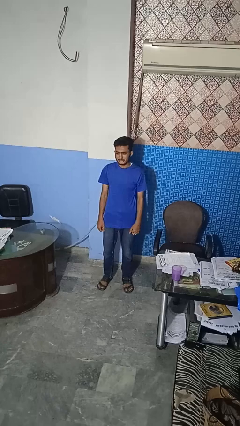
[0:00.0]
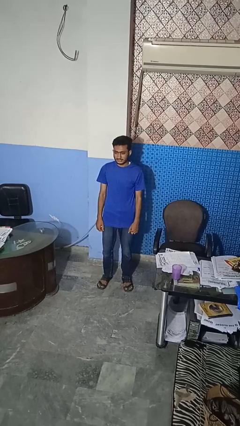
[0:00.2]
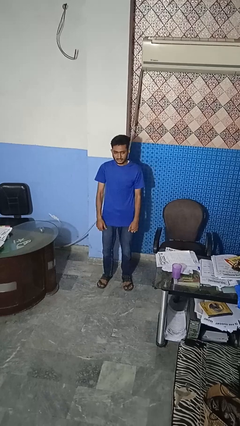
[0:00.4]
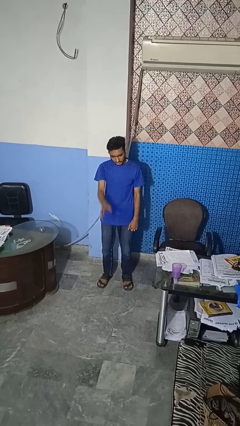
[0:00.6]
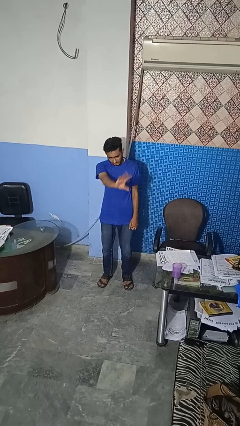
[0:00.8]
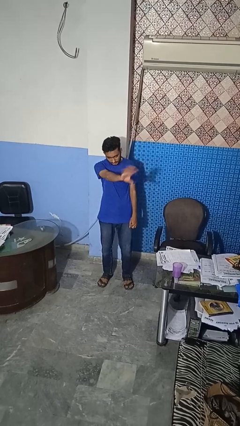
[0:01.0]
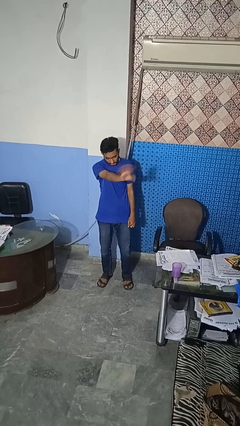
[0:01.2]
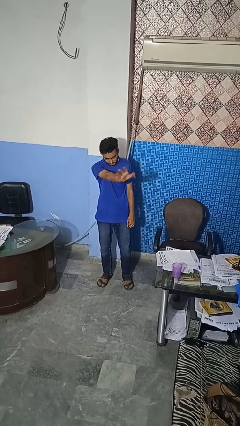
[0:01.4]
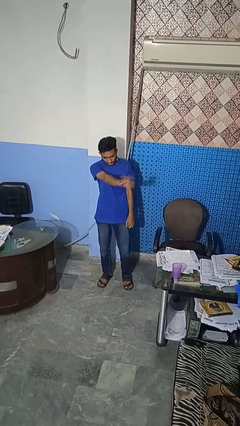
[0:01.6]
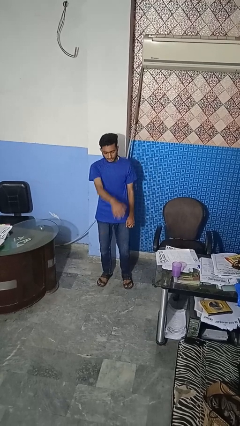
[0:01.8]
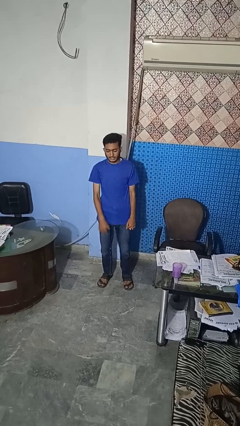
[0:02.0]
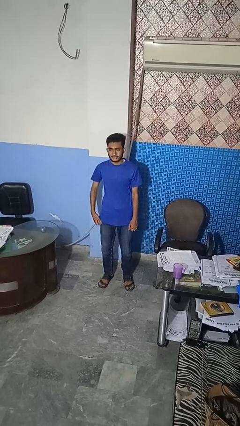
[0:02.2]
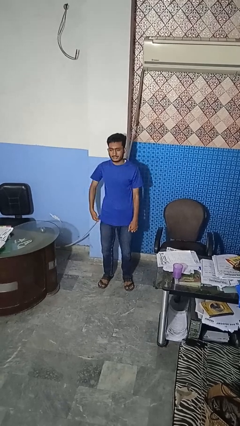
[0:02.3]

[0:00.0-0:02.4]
person waves at person

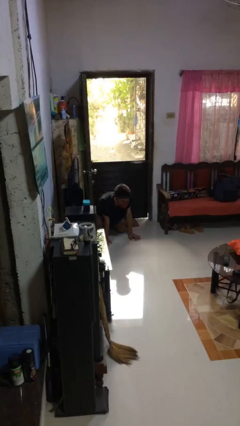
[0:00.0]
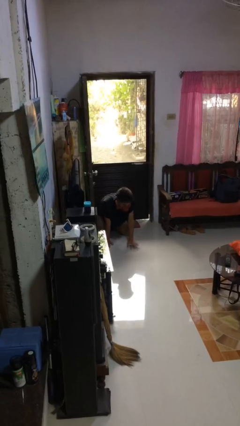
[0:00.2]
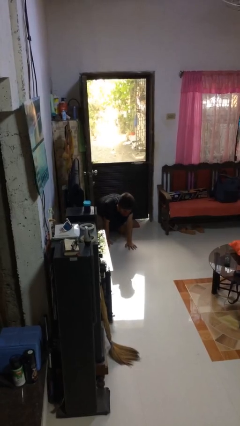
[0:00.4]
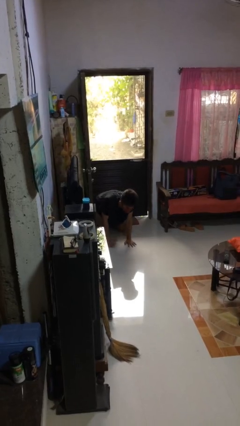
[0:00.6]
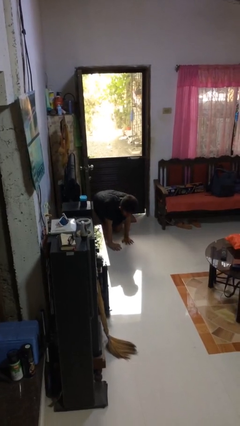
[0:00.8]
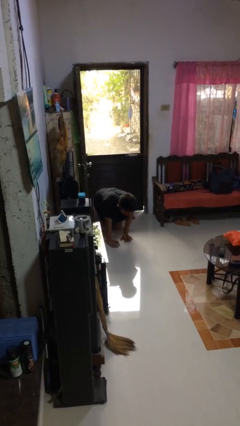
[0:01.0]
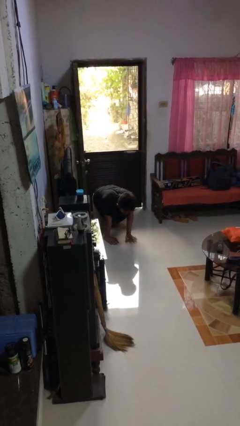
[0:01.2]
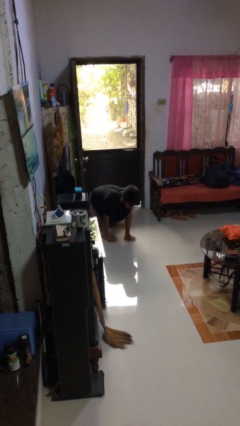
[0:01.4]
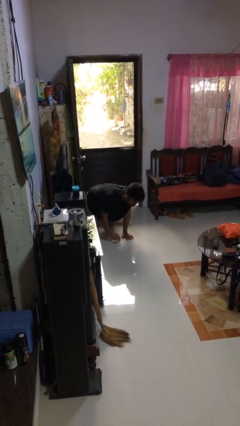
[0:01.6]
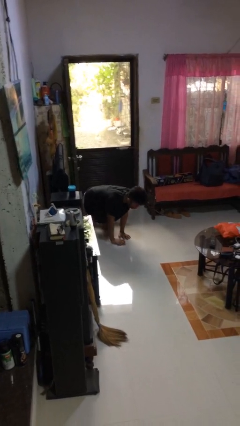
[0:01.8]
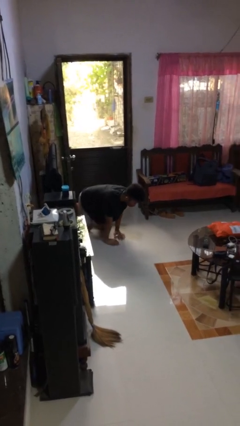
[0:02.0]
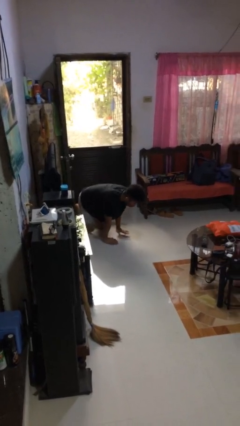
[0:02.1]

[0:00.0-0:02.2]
person crawls

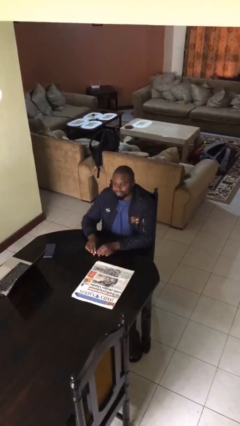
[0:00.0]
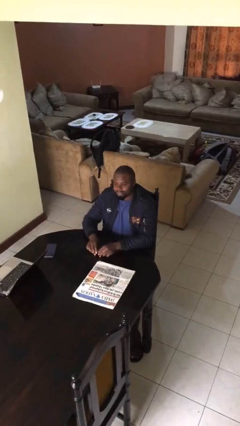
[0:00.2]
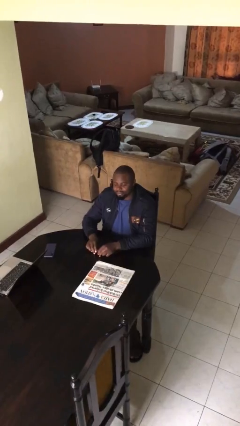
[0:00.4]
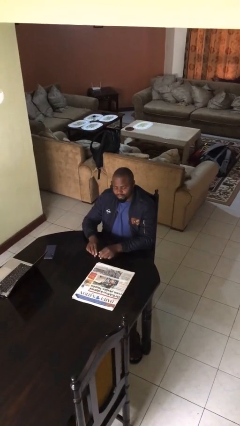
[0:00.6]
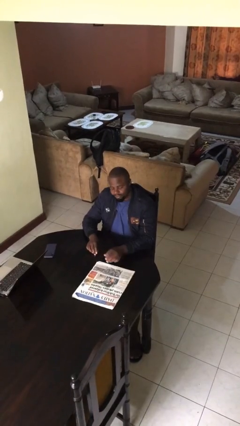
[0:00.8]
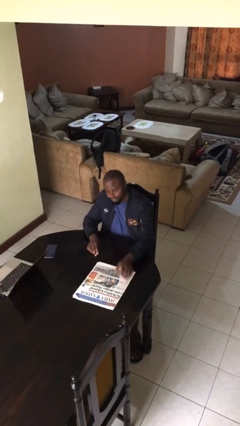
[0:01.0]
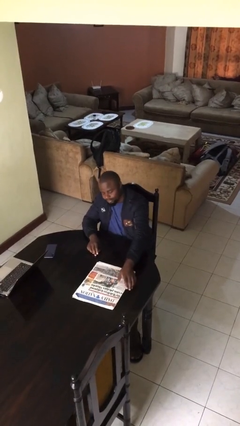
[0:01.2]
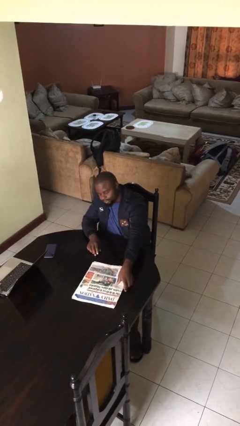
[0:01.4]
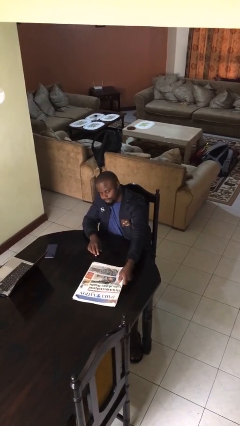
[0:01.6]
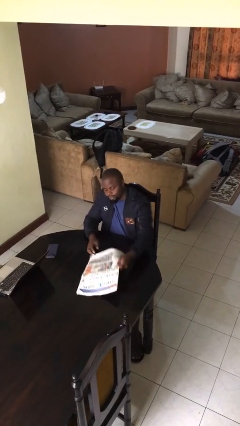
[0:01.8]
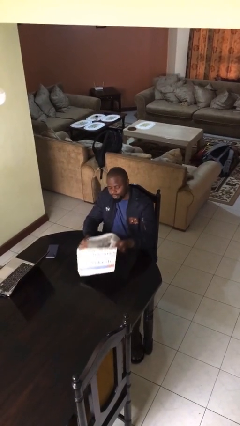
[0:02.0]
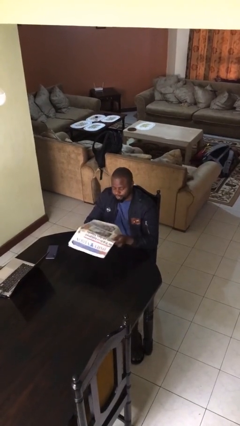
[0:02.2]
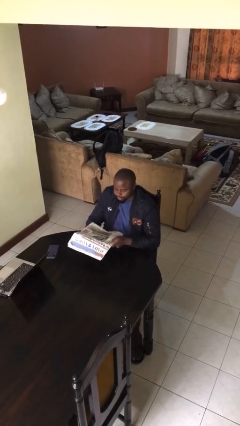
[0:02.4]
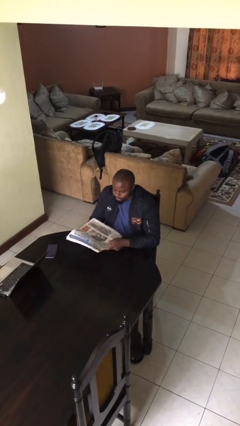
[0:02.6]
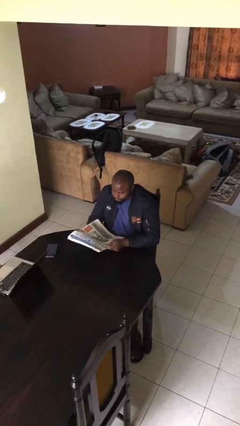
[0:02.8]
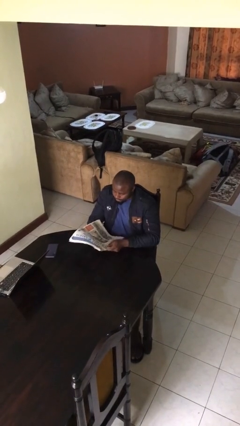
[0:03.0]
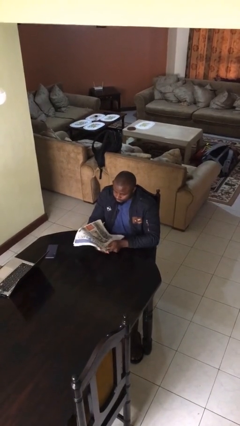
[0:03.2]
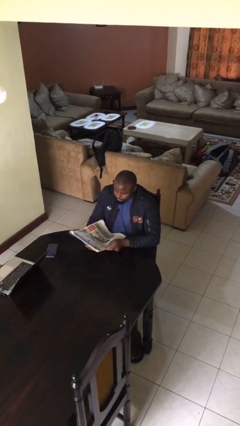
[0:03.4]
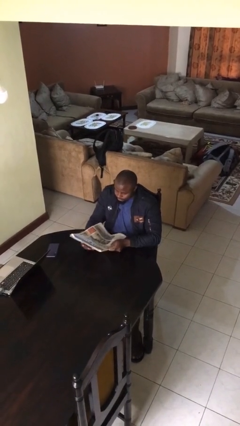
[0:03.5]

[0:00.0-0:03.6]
person picks up object from table

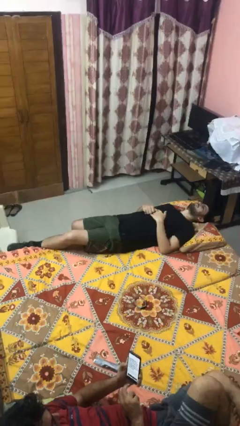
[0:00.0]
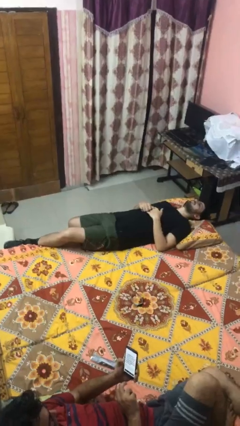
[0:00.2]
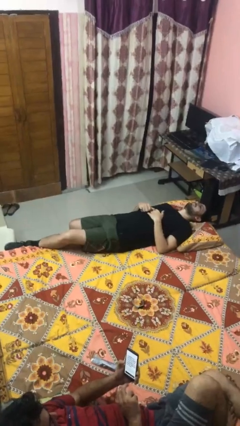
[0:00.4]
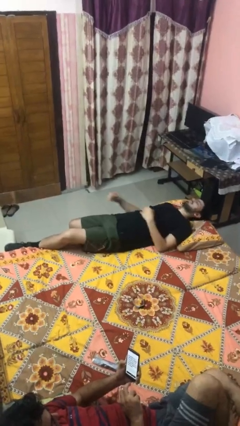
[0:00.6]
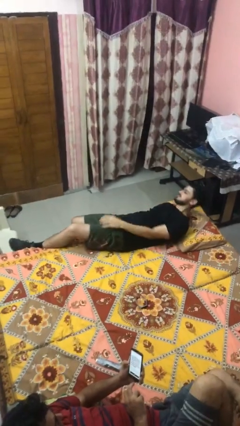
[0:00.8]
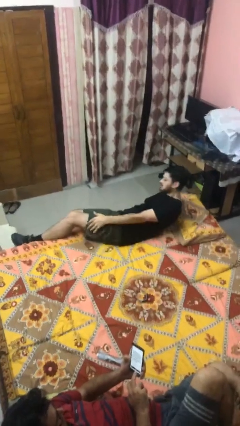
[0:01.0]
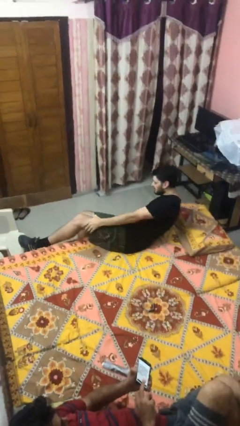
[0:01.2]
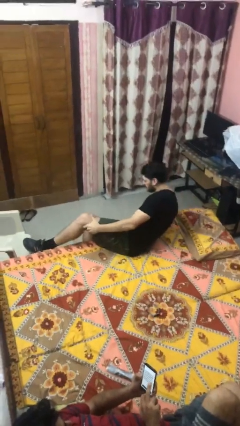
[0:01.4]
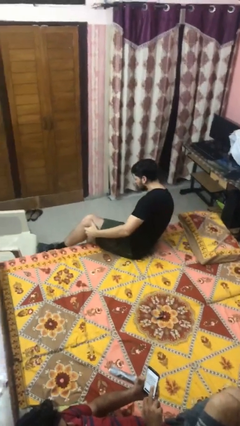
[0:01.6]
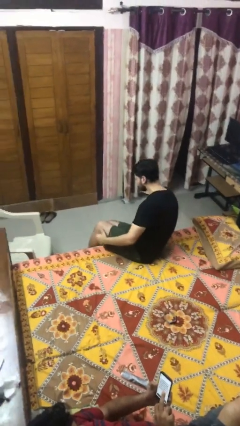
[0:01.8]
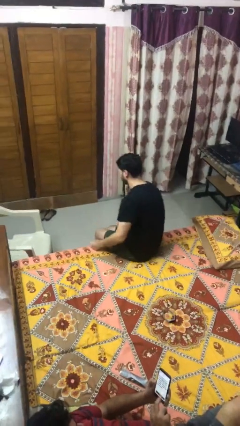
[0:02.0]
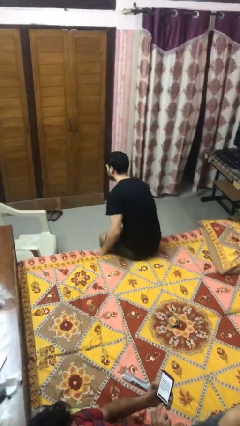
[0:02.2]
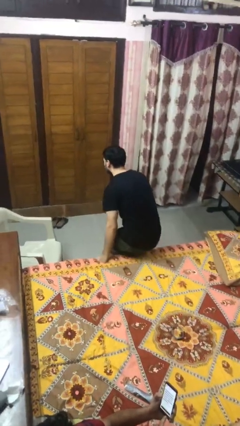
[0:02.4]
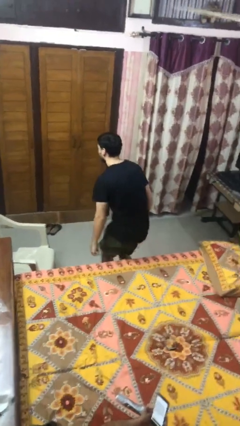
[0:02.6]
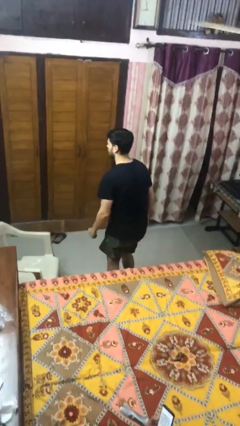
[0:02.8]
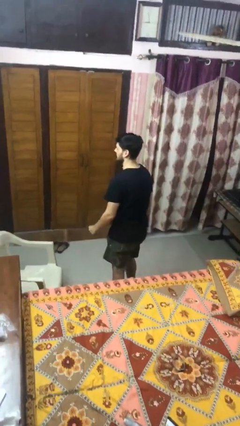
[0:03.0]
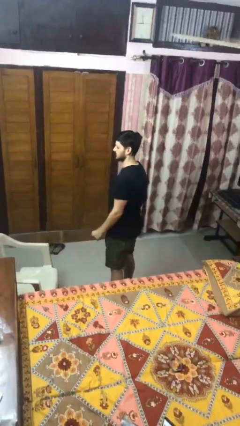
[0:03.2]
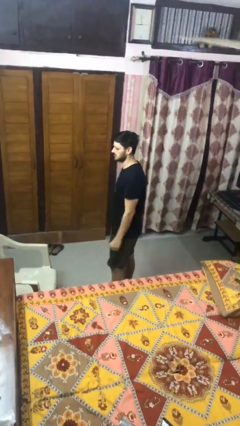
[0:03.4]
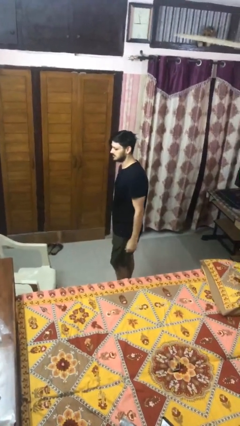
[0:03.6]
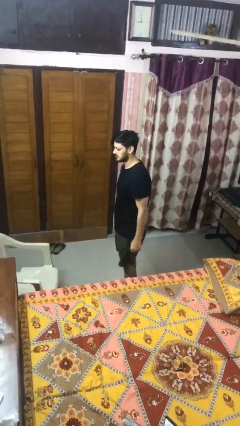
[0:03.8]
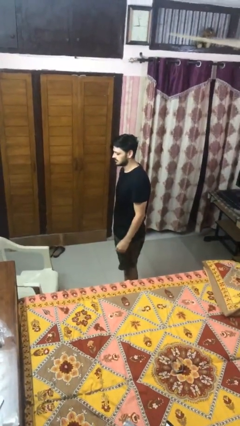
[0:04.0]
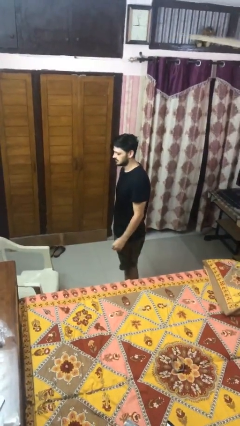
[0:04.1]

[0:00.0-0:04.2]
person stands up

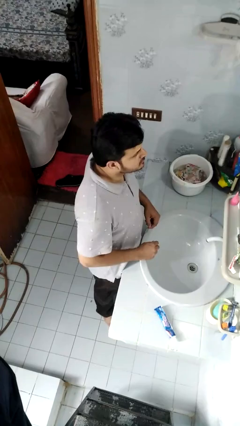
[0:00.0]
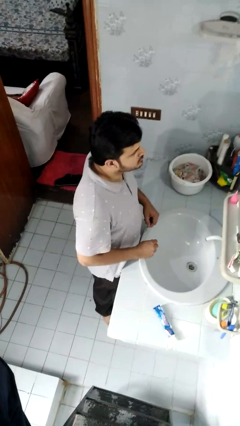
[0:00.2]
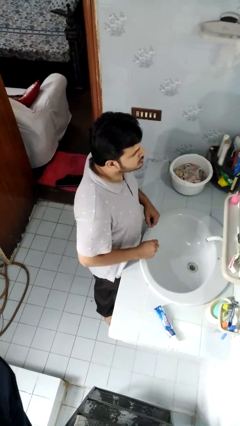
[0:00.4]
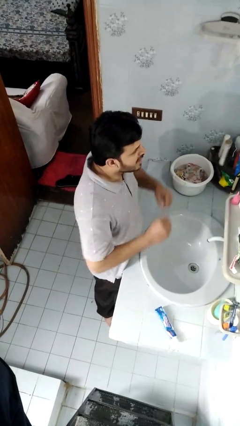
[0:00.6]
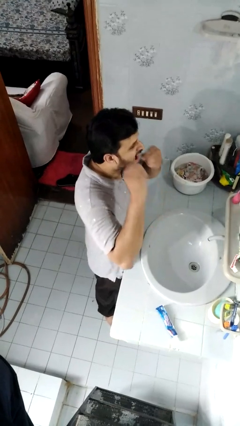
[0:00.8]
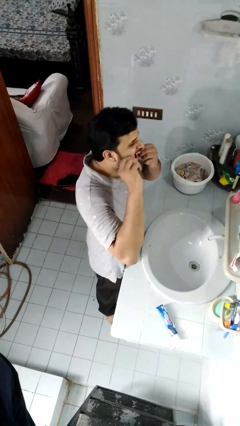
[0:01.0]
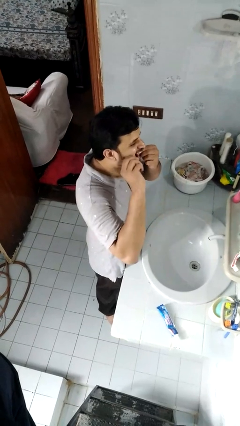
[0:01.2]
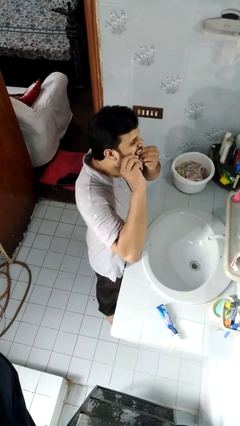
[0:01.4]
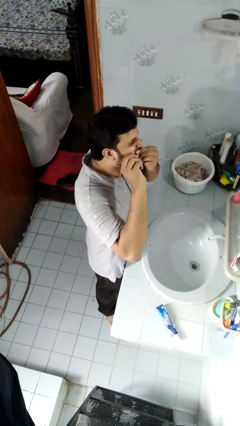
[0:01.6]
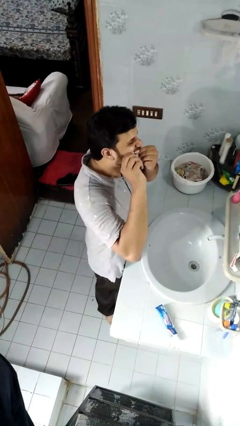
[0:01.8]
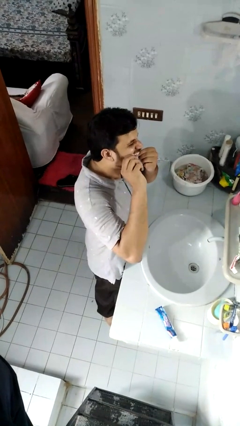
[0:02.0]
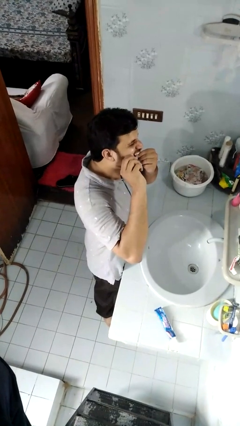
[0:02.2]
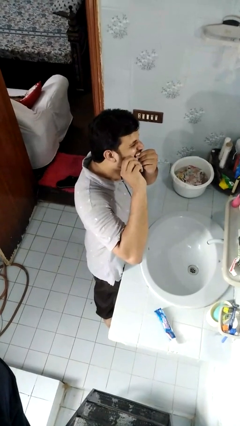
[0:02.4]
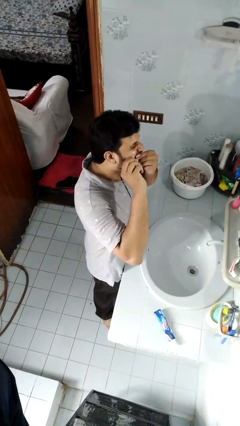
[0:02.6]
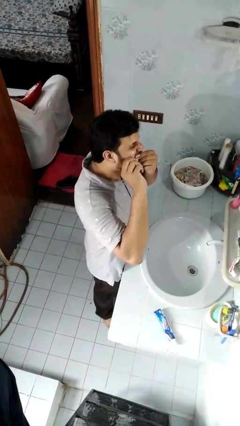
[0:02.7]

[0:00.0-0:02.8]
person flosses

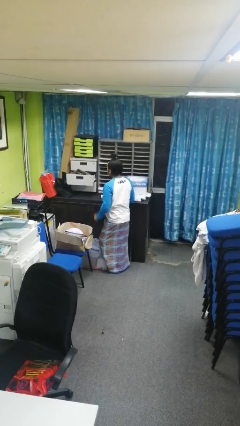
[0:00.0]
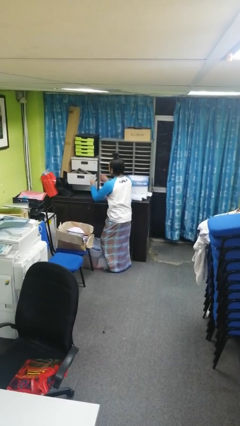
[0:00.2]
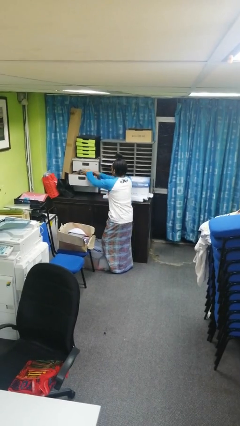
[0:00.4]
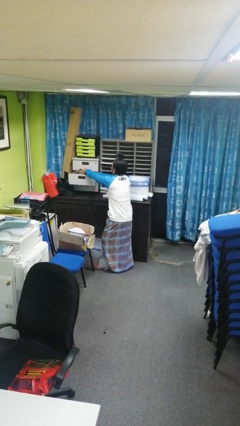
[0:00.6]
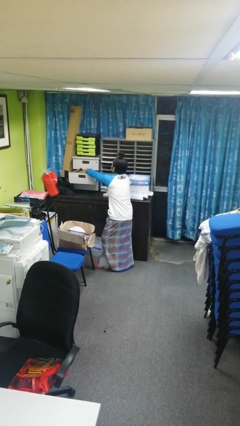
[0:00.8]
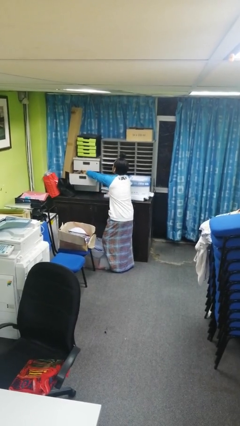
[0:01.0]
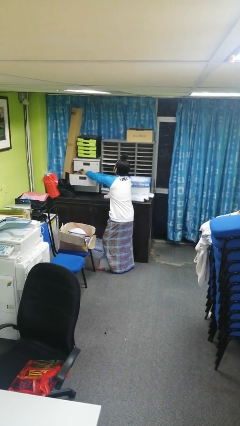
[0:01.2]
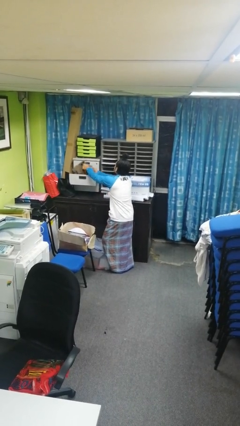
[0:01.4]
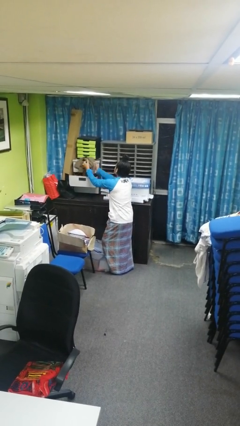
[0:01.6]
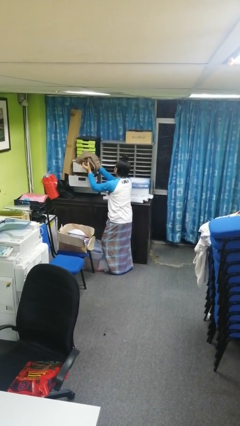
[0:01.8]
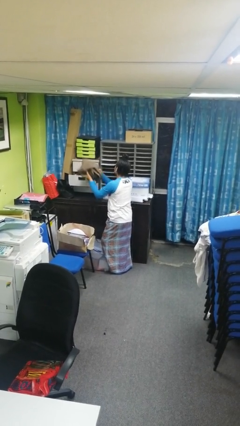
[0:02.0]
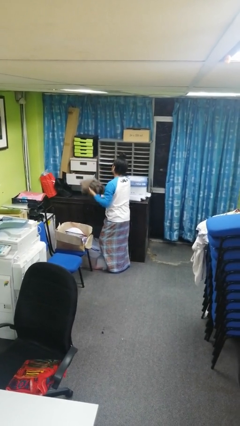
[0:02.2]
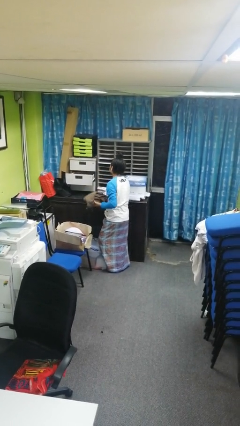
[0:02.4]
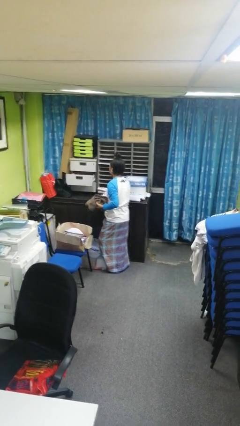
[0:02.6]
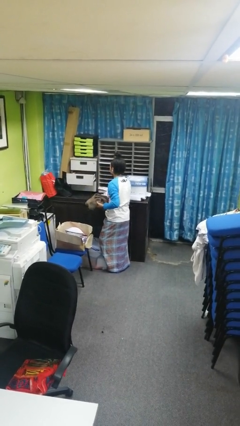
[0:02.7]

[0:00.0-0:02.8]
person takes clothes from dresser
